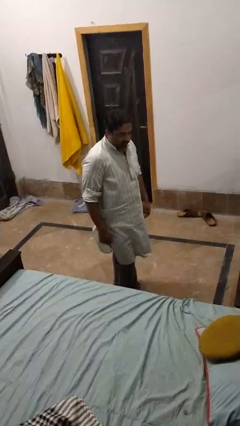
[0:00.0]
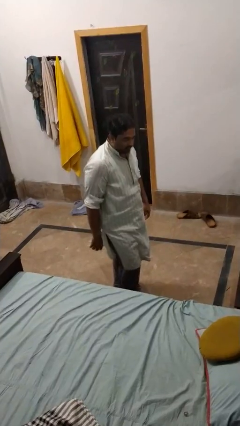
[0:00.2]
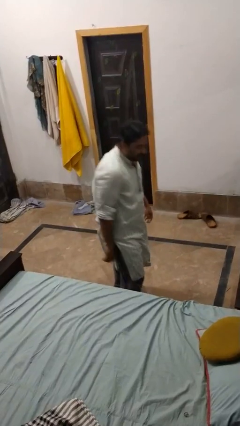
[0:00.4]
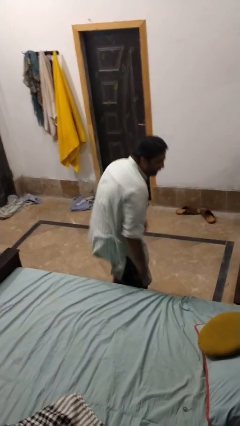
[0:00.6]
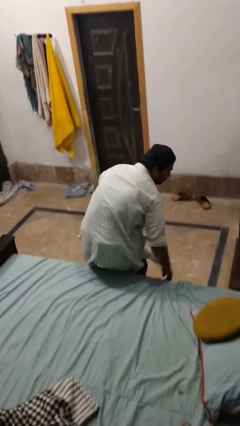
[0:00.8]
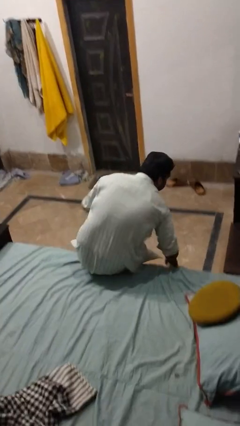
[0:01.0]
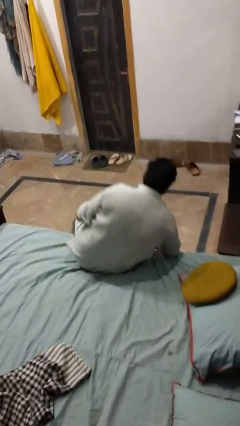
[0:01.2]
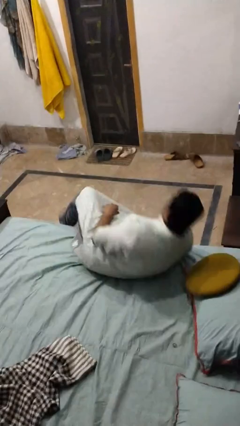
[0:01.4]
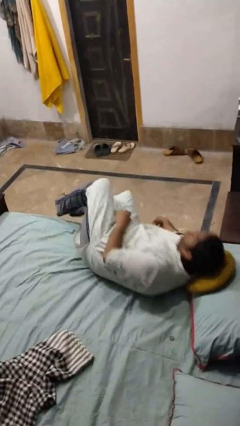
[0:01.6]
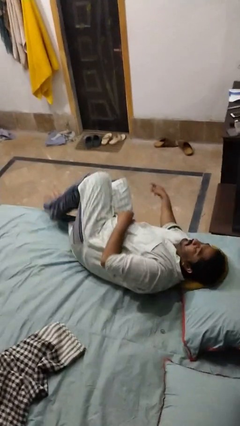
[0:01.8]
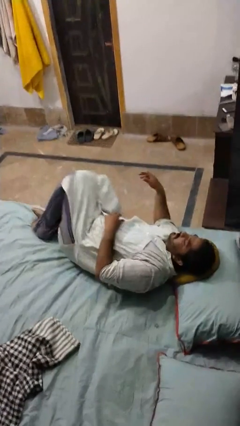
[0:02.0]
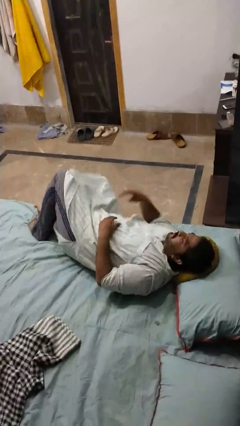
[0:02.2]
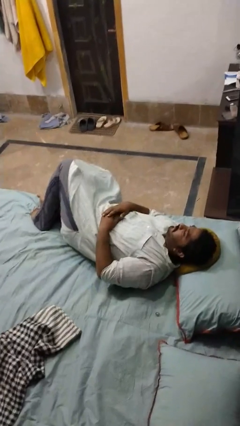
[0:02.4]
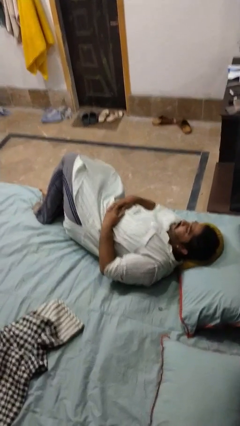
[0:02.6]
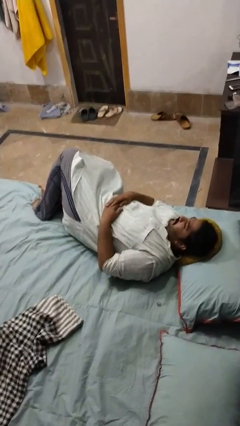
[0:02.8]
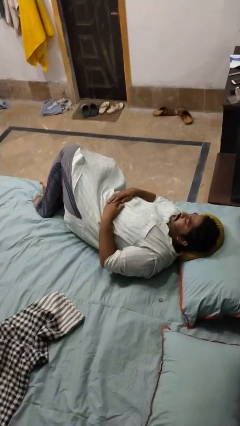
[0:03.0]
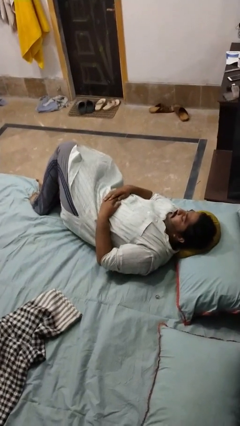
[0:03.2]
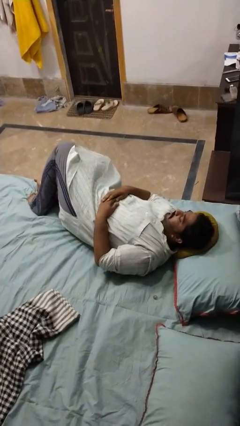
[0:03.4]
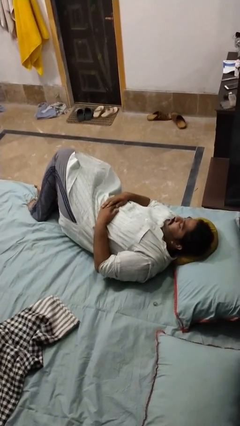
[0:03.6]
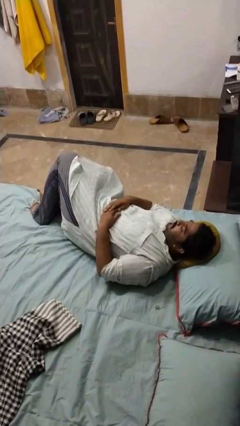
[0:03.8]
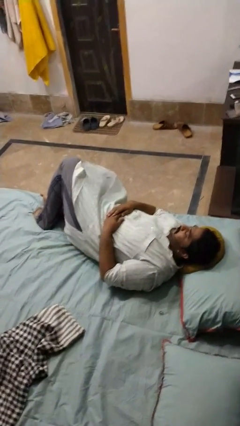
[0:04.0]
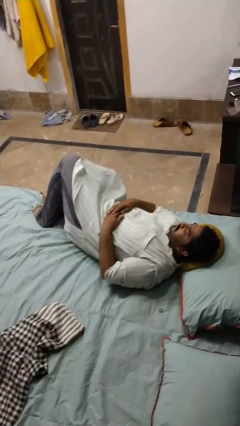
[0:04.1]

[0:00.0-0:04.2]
person lies down on bed

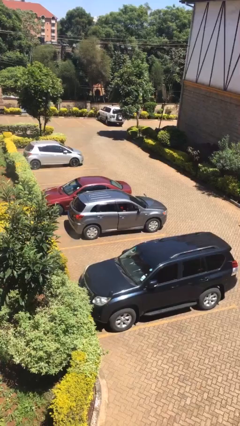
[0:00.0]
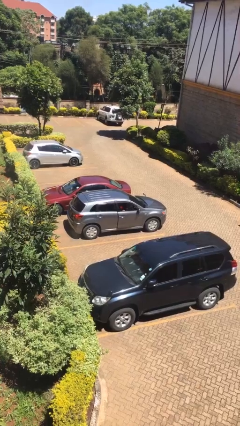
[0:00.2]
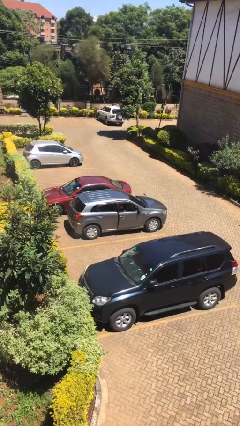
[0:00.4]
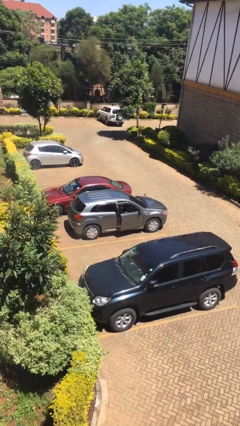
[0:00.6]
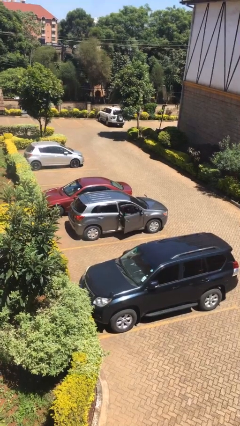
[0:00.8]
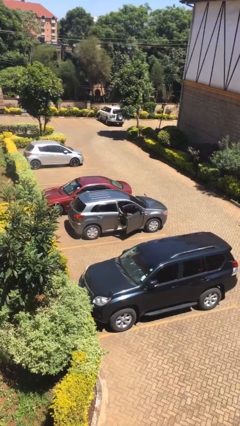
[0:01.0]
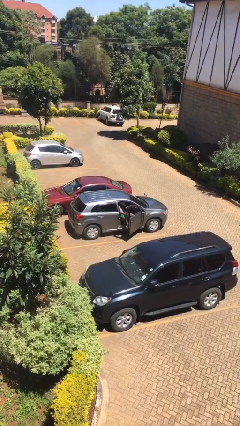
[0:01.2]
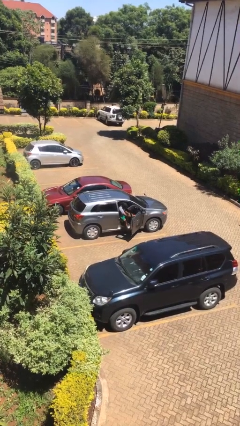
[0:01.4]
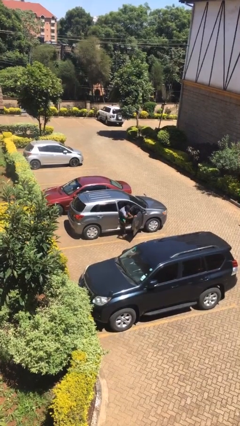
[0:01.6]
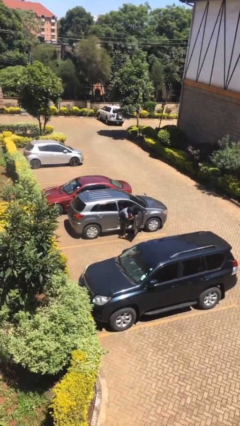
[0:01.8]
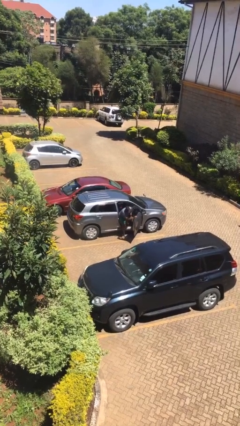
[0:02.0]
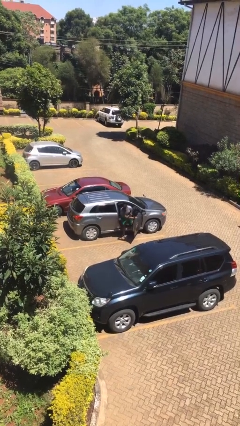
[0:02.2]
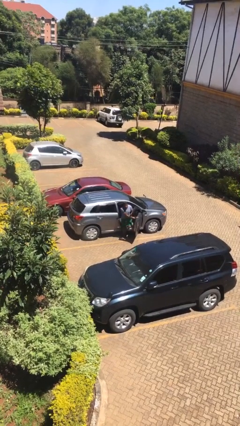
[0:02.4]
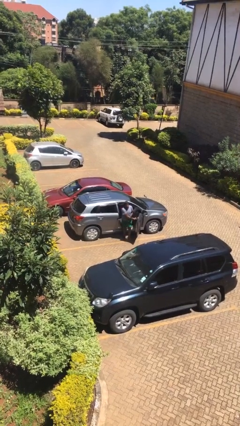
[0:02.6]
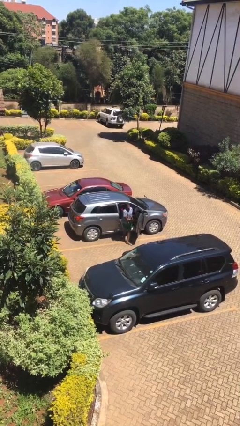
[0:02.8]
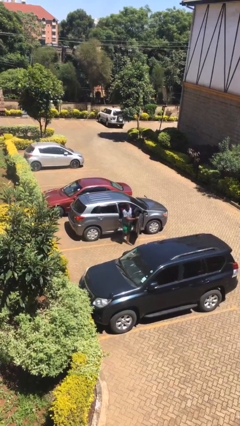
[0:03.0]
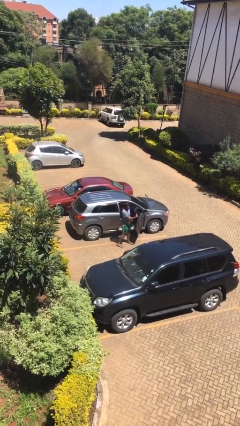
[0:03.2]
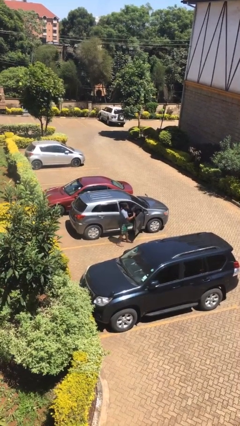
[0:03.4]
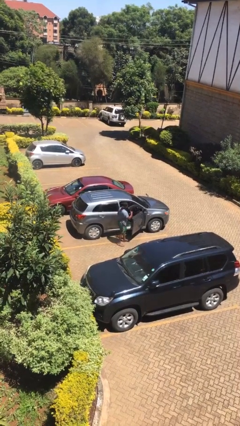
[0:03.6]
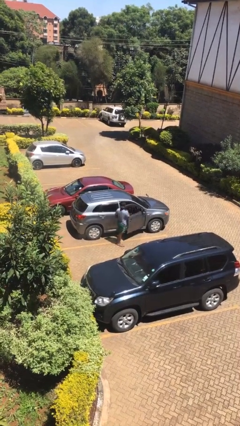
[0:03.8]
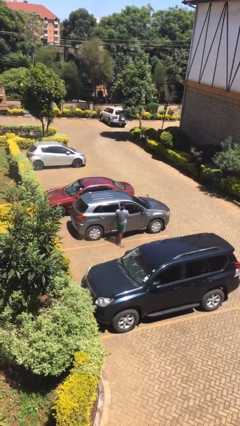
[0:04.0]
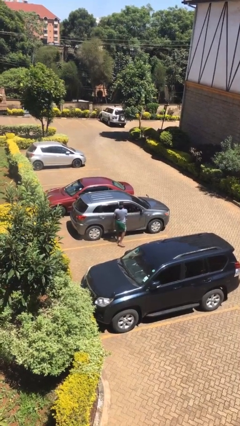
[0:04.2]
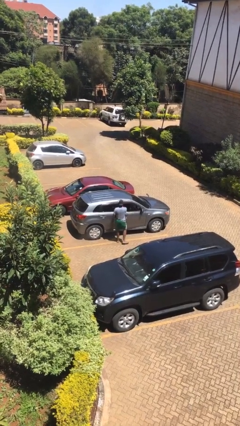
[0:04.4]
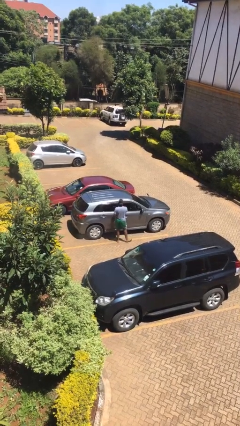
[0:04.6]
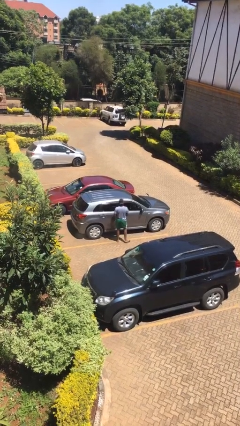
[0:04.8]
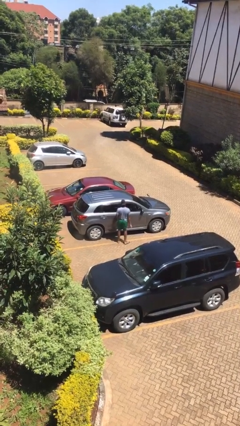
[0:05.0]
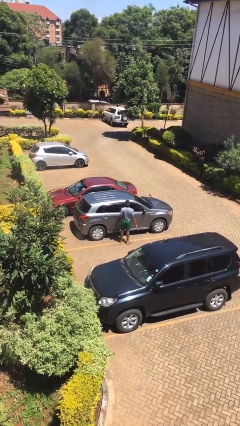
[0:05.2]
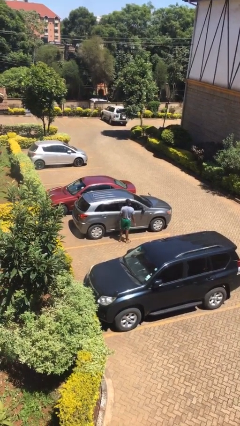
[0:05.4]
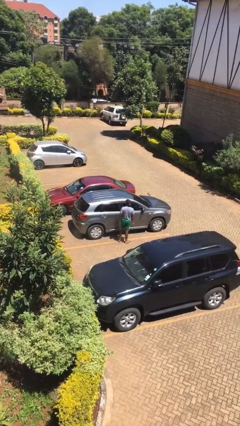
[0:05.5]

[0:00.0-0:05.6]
car drops off person

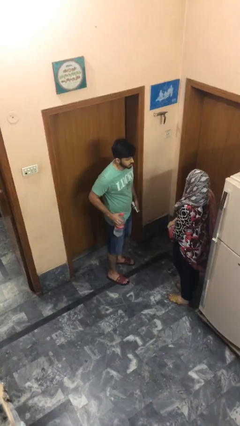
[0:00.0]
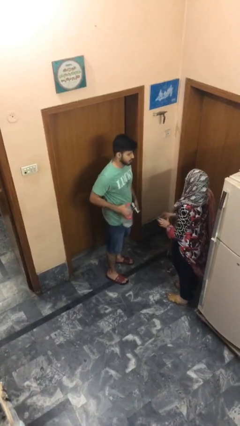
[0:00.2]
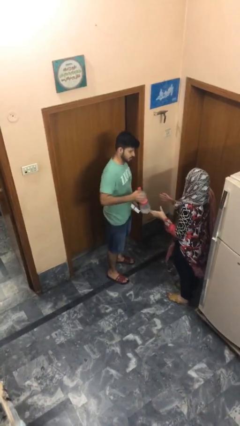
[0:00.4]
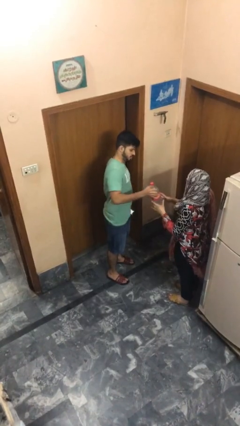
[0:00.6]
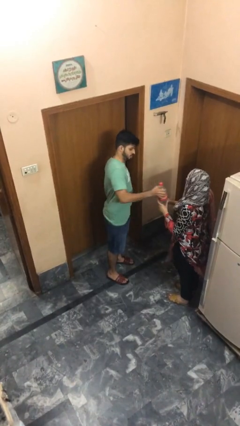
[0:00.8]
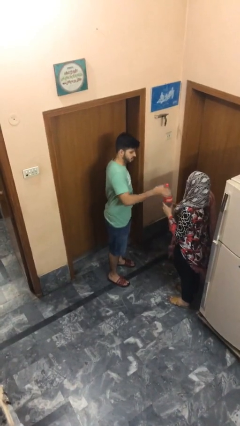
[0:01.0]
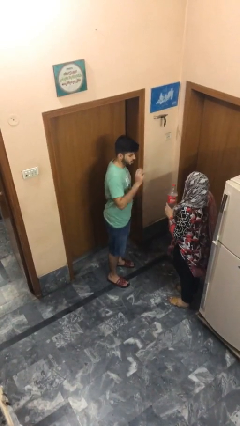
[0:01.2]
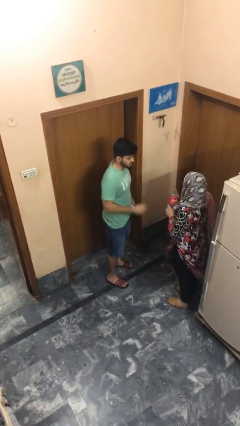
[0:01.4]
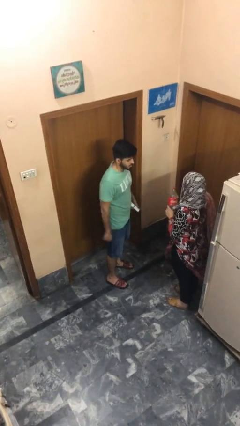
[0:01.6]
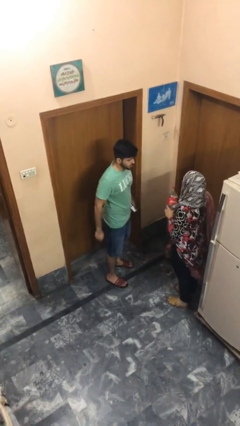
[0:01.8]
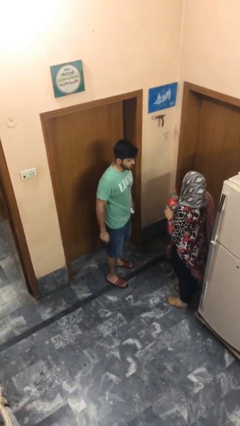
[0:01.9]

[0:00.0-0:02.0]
person transfers object to person

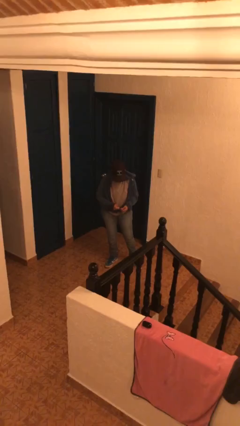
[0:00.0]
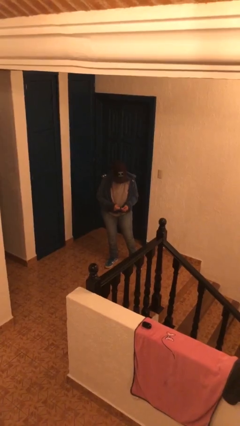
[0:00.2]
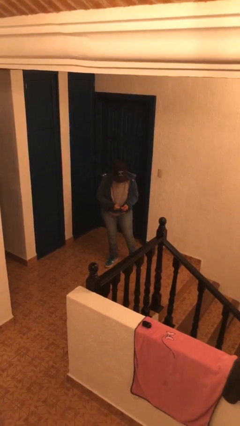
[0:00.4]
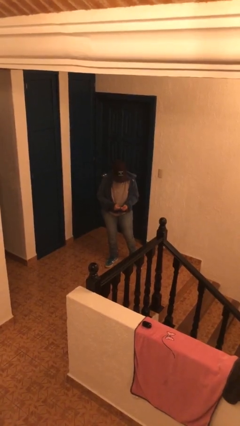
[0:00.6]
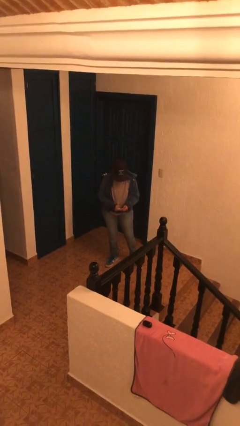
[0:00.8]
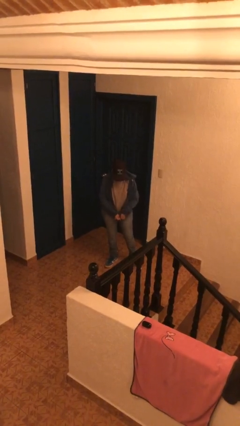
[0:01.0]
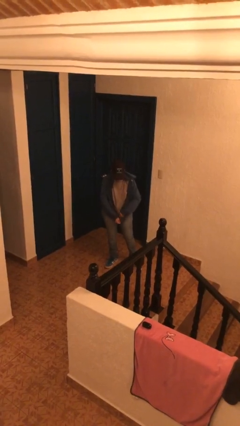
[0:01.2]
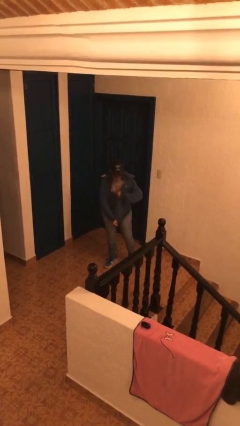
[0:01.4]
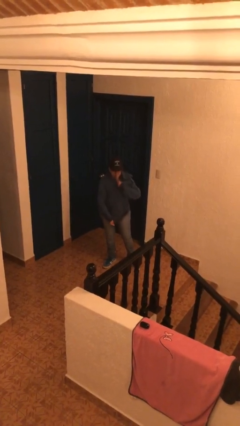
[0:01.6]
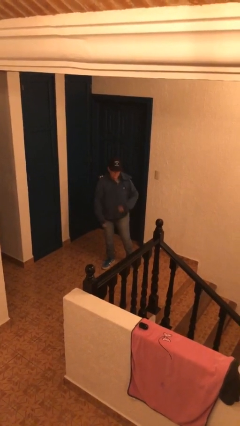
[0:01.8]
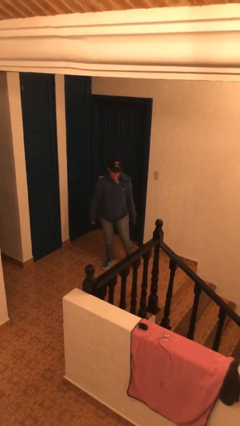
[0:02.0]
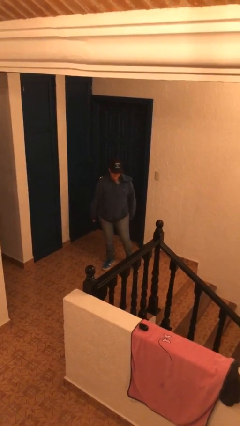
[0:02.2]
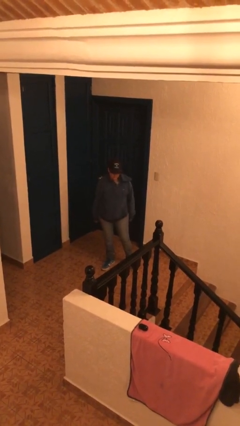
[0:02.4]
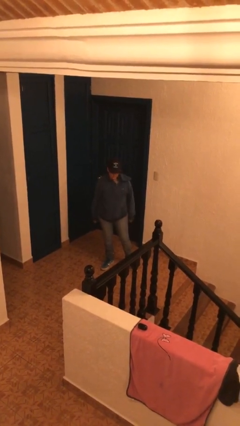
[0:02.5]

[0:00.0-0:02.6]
person zips up jacket

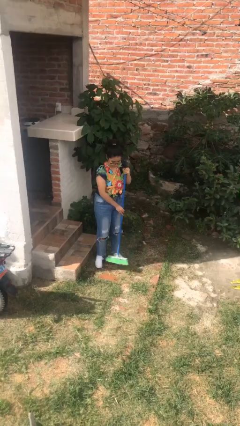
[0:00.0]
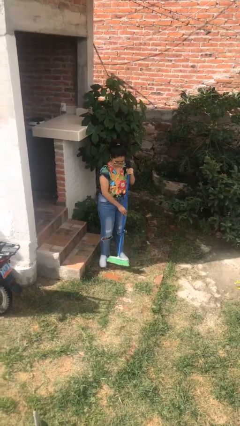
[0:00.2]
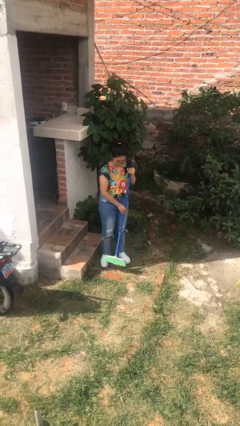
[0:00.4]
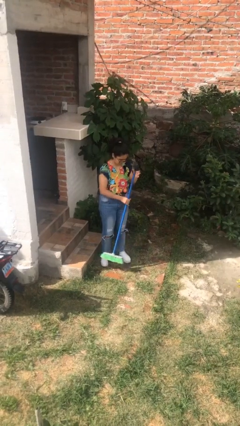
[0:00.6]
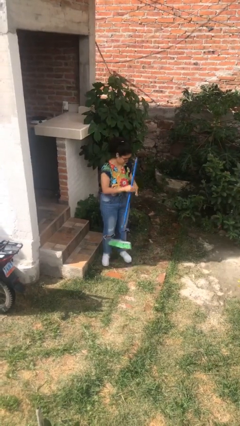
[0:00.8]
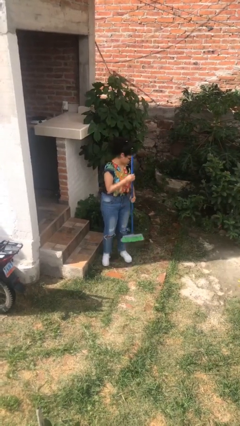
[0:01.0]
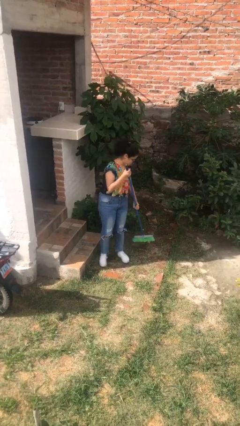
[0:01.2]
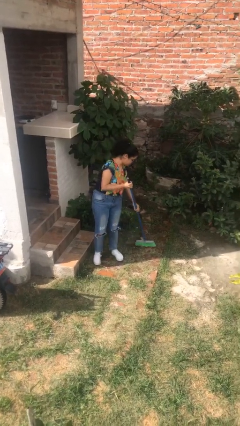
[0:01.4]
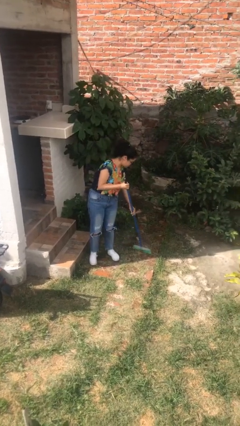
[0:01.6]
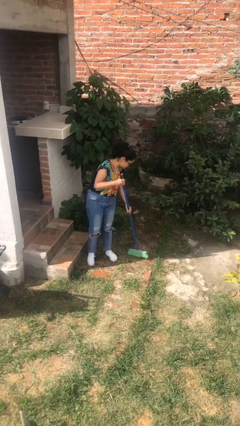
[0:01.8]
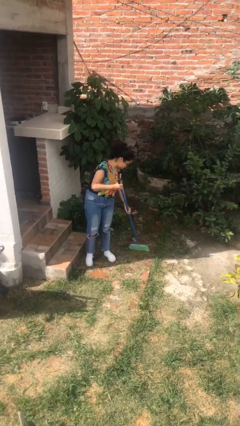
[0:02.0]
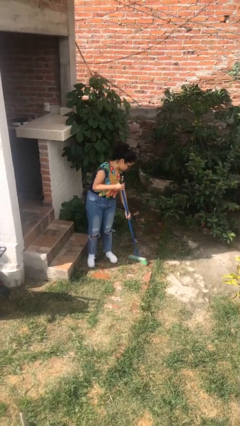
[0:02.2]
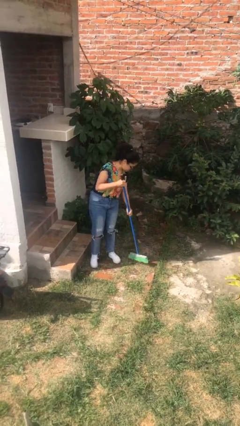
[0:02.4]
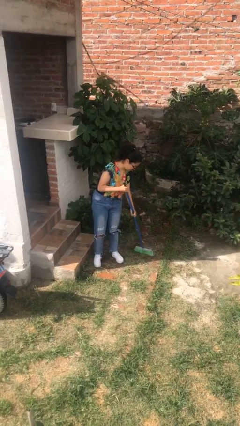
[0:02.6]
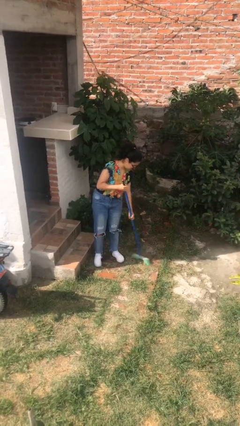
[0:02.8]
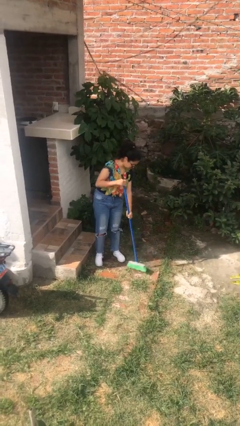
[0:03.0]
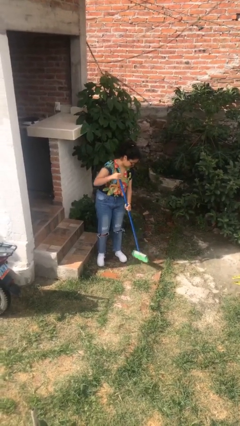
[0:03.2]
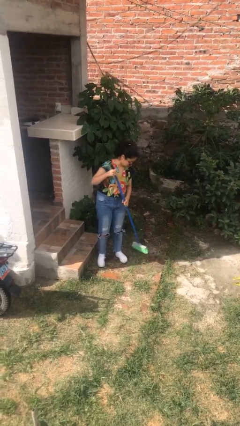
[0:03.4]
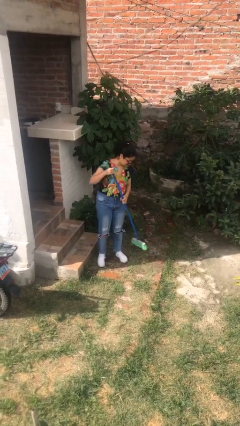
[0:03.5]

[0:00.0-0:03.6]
person sweeps floor
